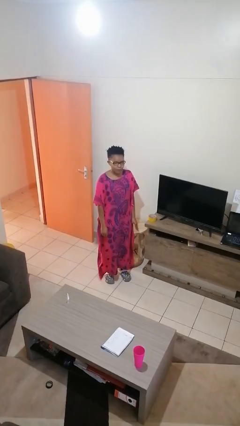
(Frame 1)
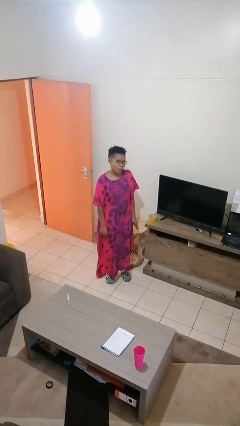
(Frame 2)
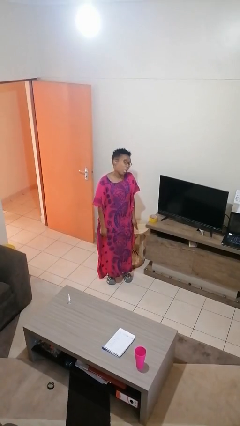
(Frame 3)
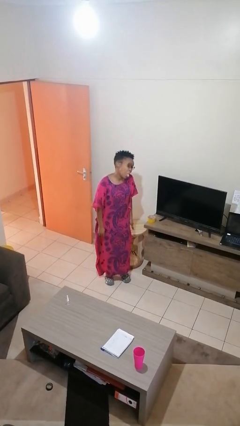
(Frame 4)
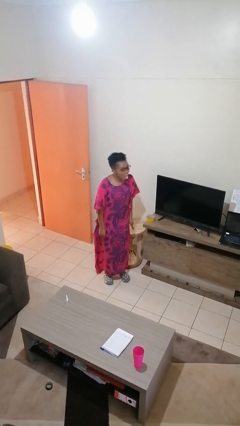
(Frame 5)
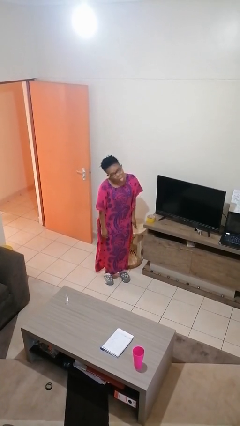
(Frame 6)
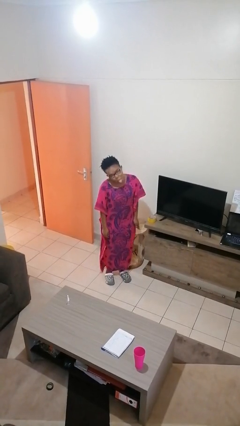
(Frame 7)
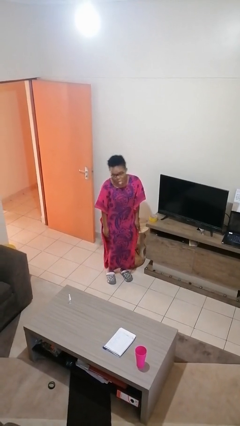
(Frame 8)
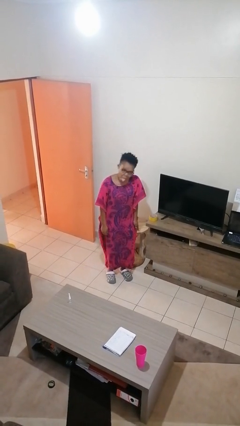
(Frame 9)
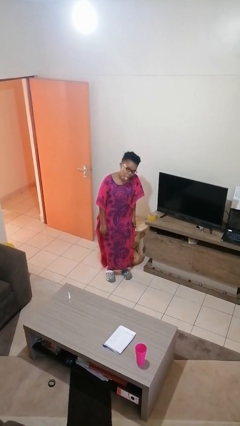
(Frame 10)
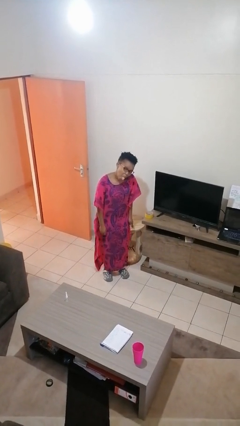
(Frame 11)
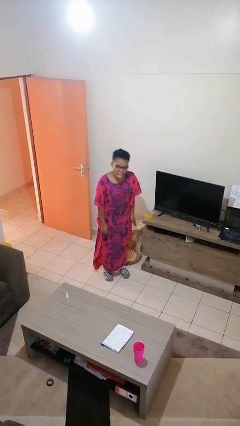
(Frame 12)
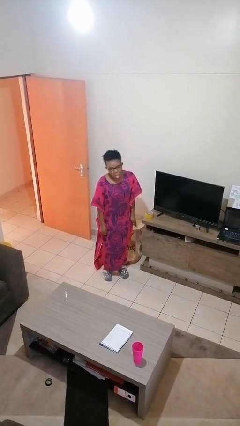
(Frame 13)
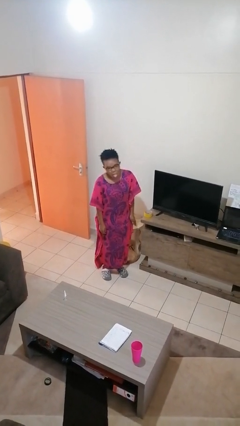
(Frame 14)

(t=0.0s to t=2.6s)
person sticks out tongue

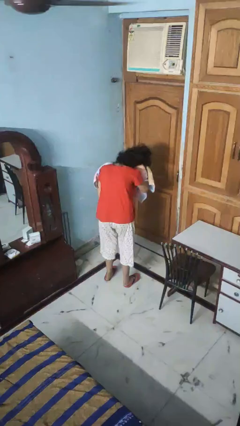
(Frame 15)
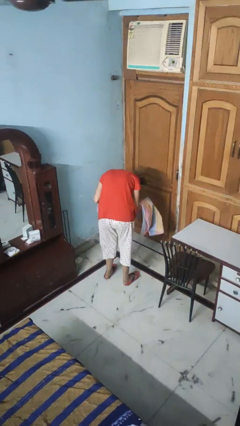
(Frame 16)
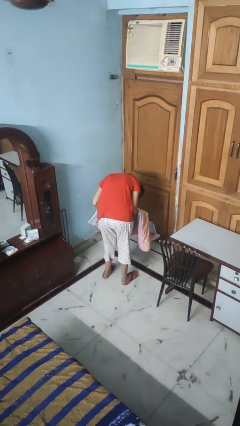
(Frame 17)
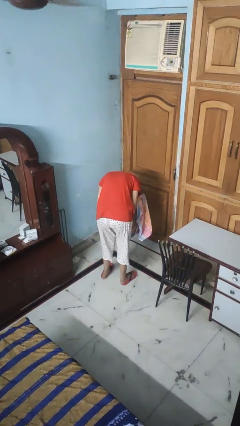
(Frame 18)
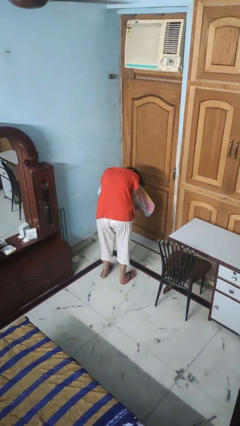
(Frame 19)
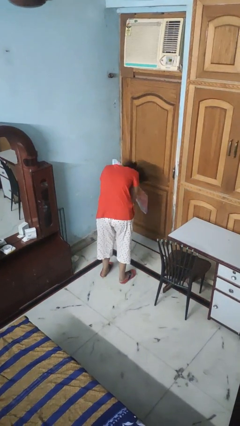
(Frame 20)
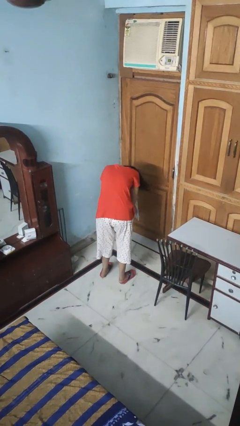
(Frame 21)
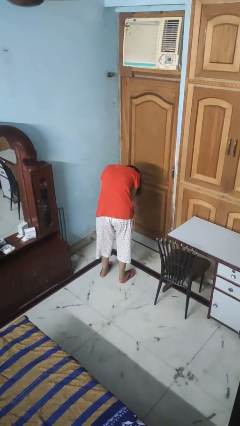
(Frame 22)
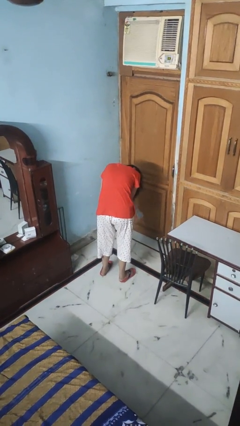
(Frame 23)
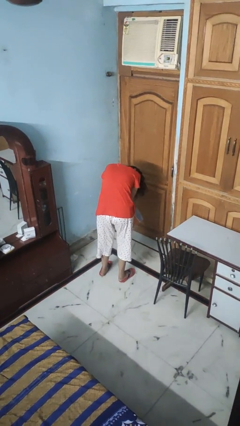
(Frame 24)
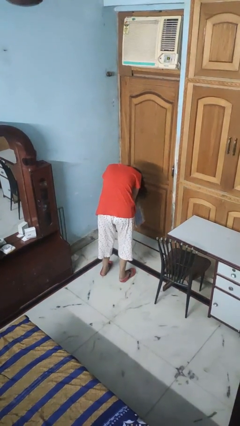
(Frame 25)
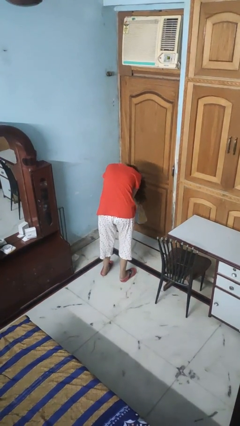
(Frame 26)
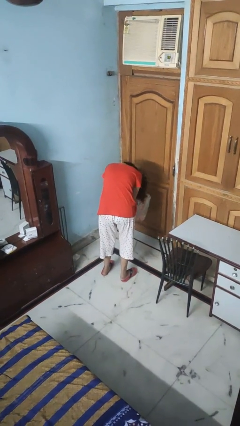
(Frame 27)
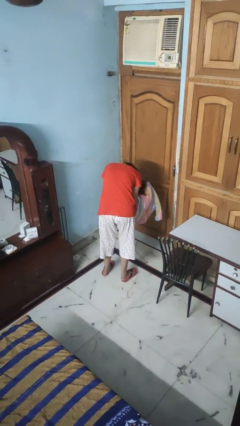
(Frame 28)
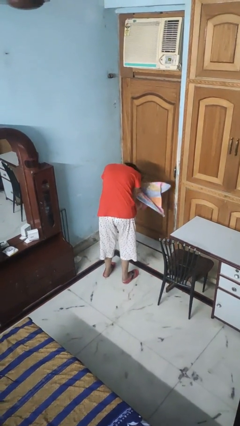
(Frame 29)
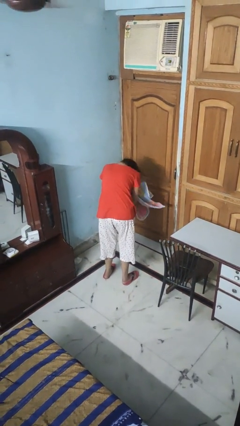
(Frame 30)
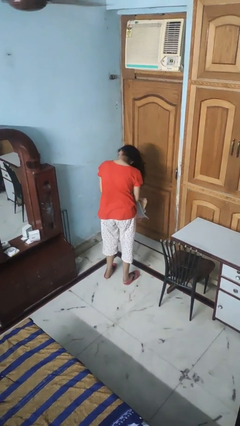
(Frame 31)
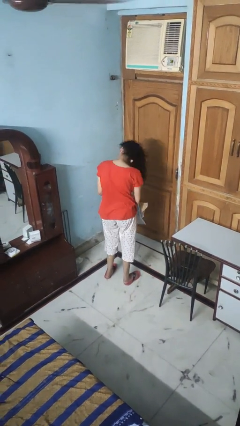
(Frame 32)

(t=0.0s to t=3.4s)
person dries hair with towel

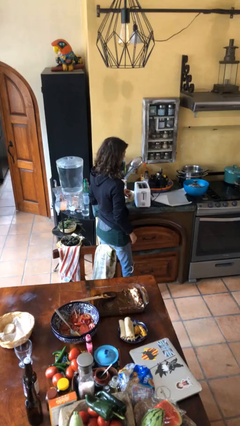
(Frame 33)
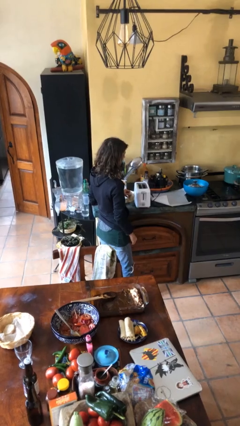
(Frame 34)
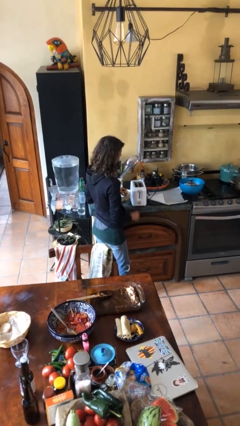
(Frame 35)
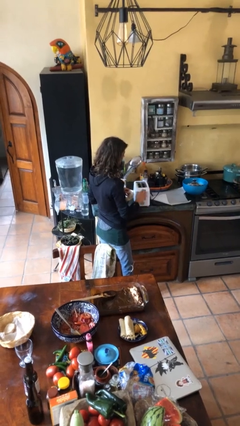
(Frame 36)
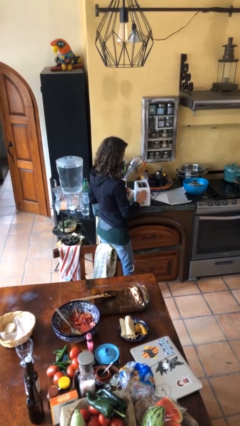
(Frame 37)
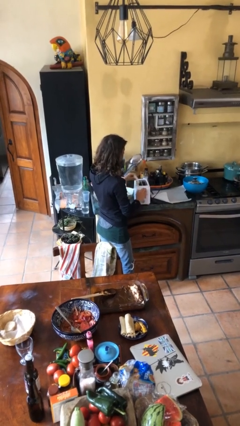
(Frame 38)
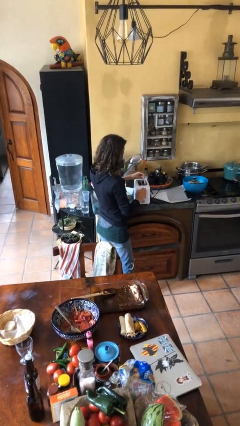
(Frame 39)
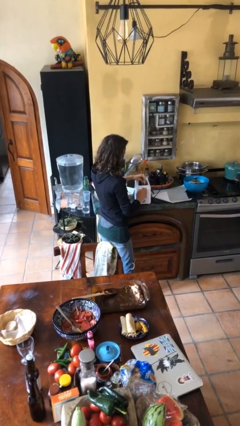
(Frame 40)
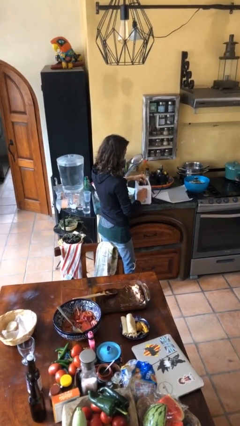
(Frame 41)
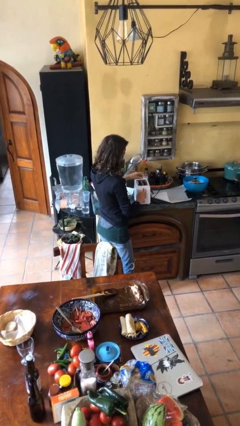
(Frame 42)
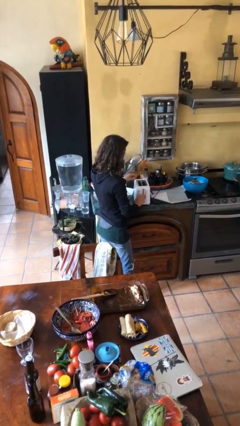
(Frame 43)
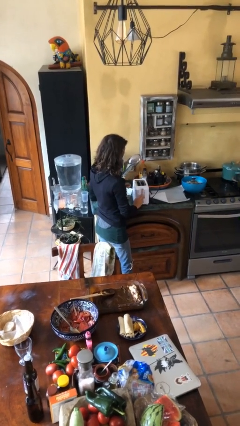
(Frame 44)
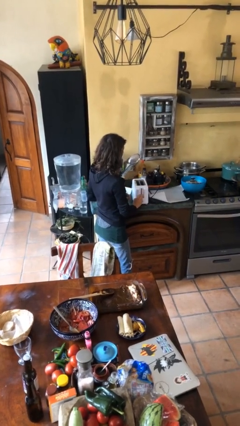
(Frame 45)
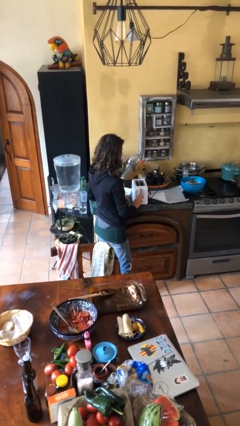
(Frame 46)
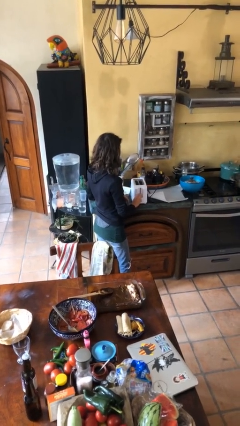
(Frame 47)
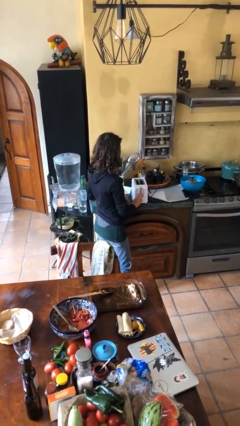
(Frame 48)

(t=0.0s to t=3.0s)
person puts object into toaster

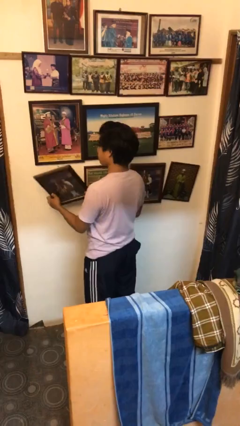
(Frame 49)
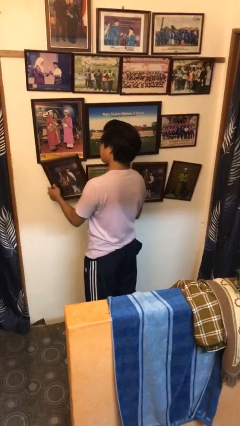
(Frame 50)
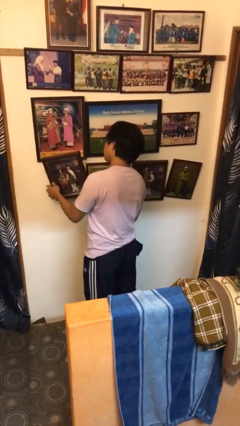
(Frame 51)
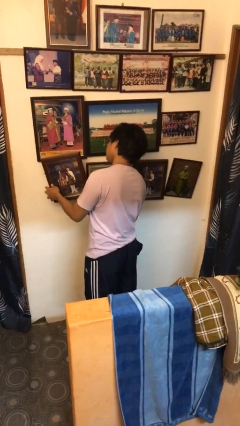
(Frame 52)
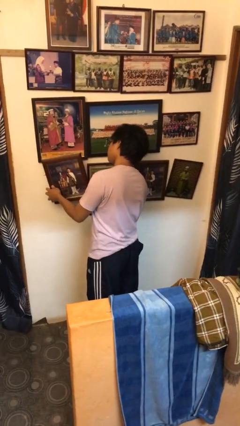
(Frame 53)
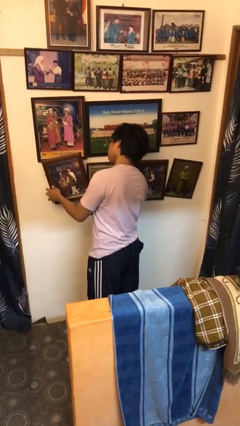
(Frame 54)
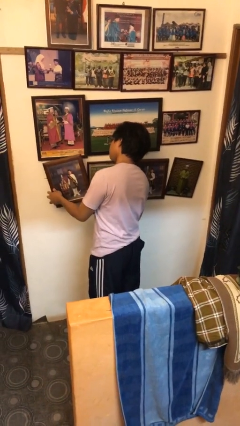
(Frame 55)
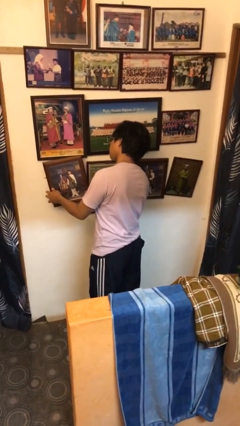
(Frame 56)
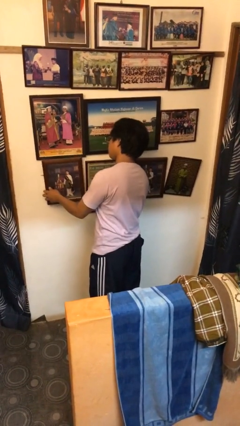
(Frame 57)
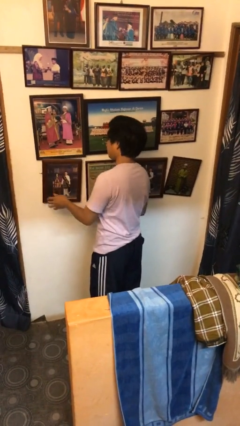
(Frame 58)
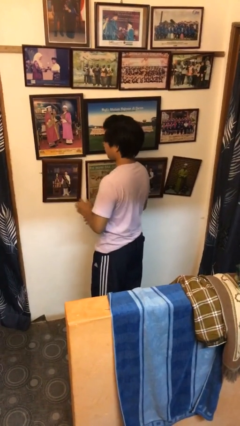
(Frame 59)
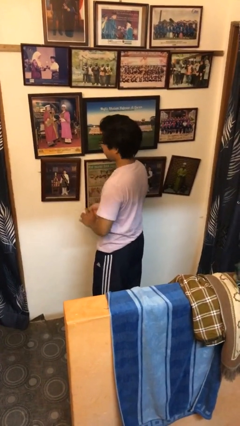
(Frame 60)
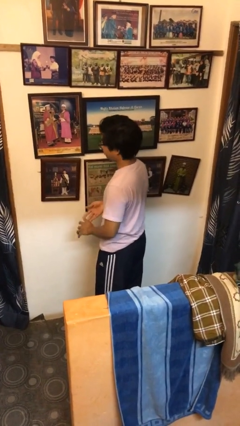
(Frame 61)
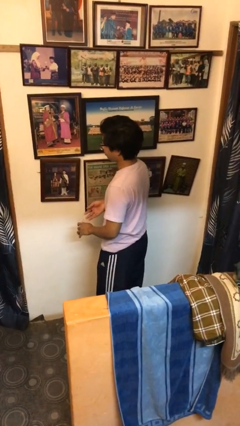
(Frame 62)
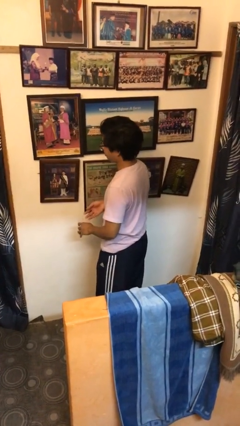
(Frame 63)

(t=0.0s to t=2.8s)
person puts up picture frame

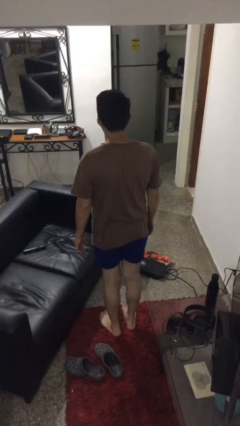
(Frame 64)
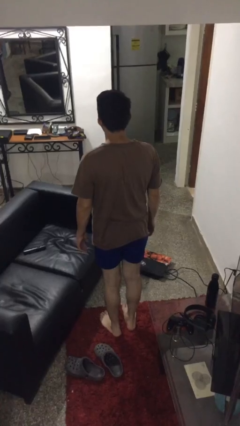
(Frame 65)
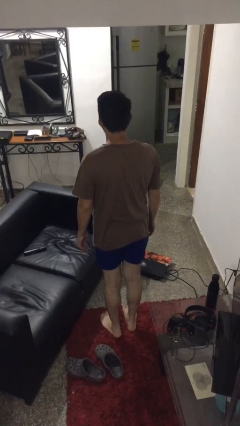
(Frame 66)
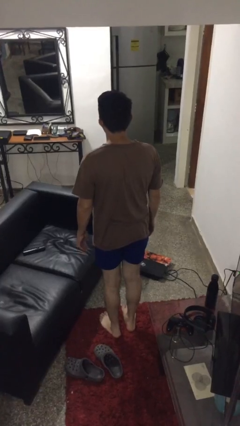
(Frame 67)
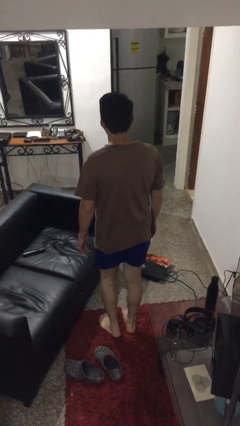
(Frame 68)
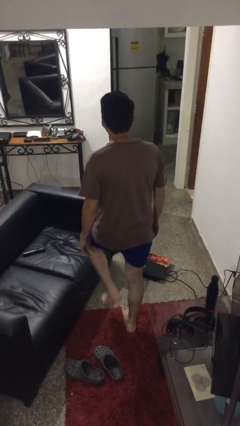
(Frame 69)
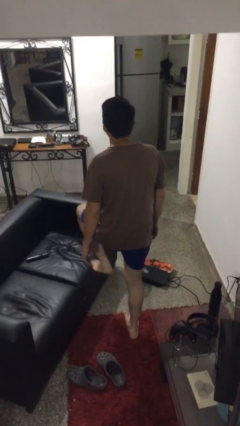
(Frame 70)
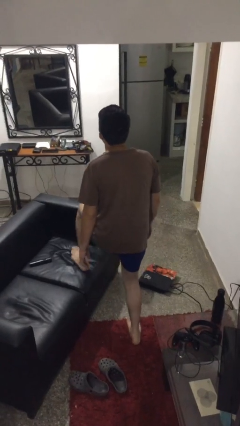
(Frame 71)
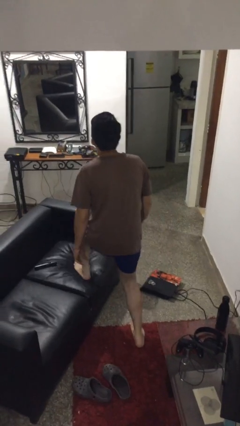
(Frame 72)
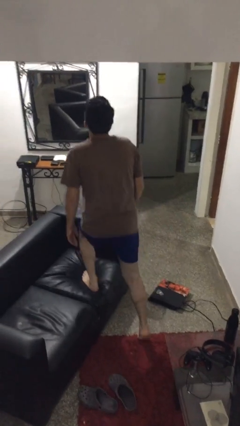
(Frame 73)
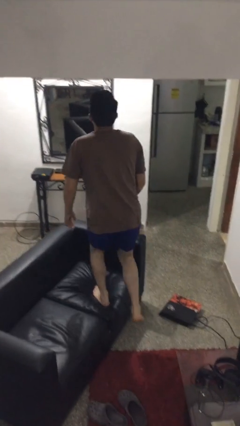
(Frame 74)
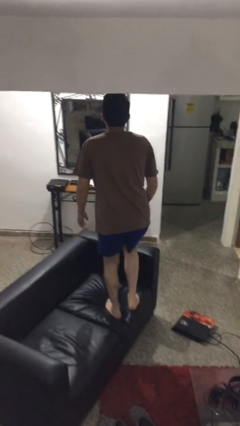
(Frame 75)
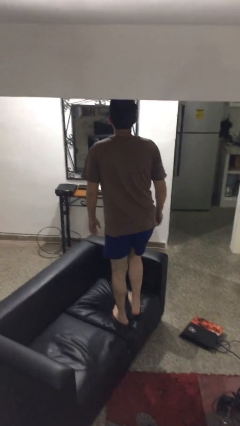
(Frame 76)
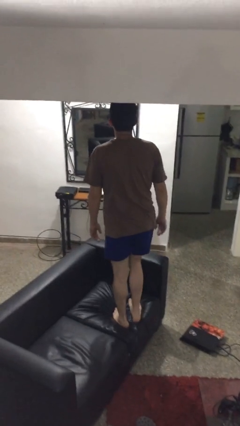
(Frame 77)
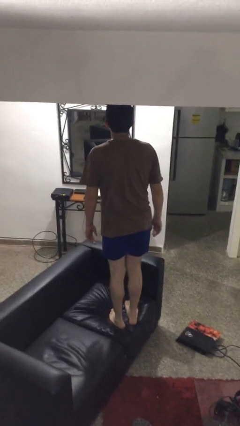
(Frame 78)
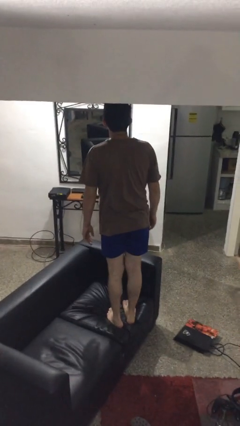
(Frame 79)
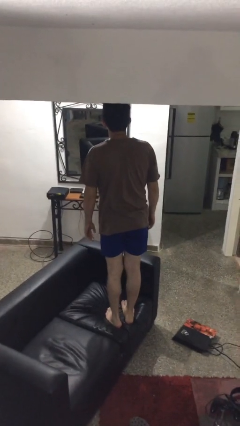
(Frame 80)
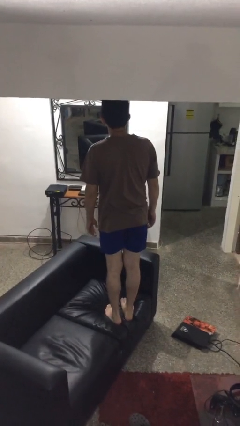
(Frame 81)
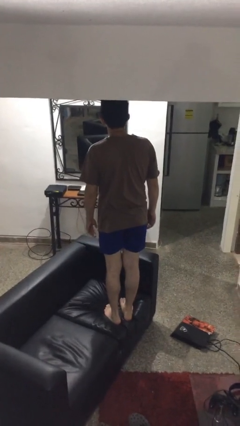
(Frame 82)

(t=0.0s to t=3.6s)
person climbs on couch

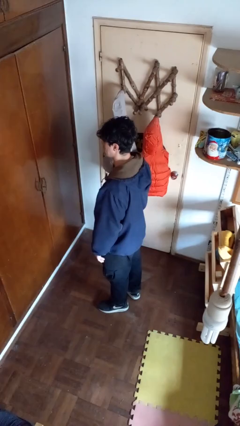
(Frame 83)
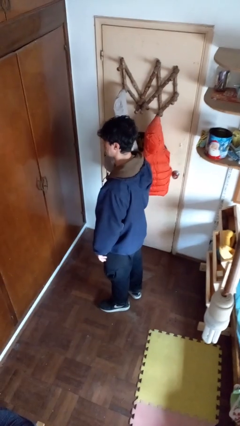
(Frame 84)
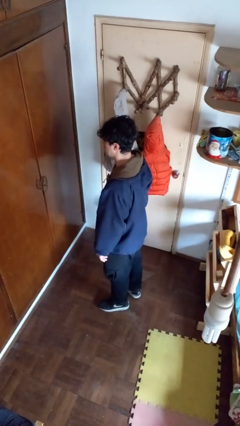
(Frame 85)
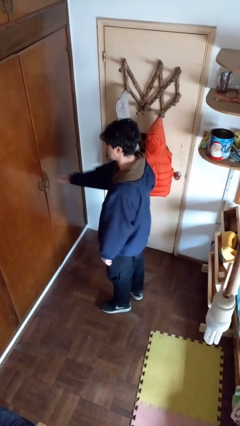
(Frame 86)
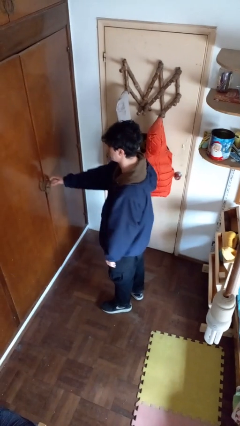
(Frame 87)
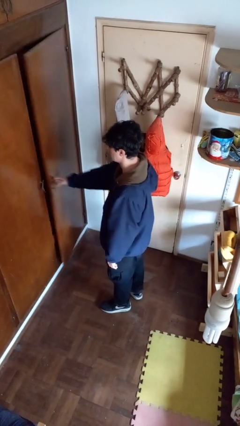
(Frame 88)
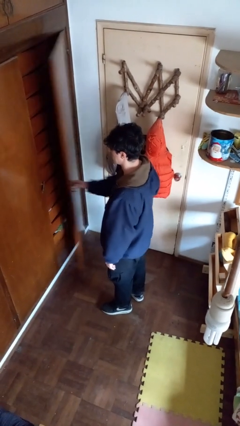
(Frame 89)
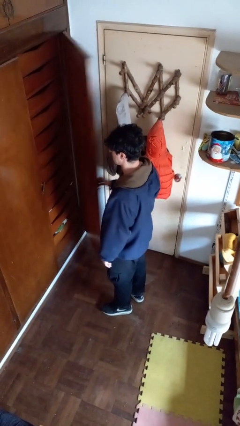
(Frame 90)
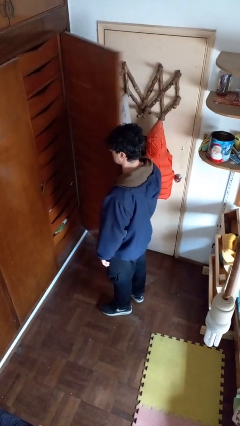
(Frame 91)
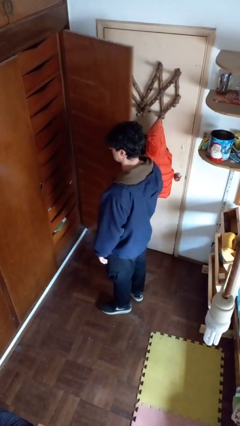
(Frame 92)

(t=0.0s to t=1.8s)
person opens closet door

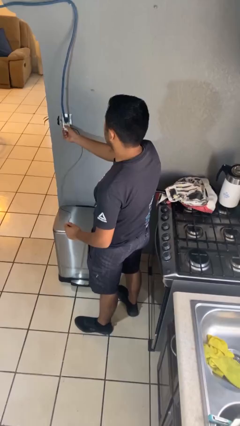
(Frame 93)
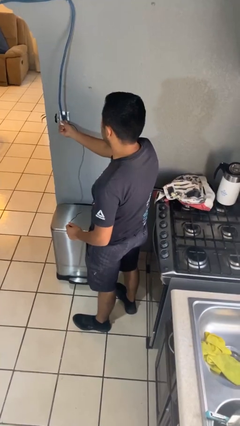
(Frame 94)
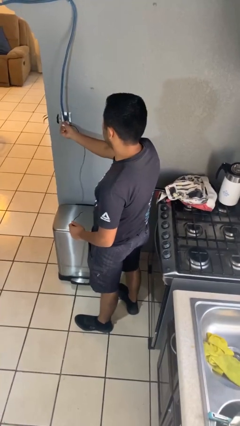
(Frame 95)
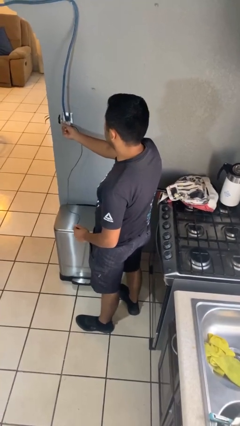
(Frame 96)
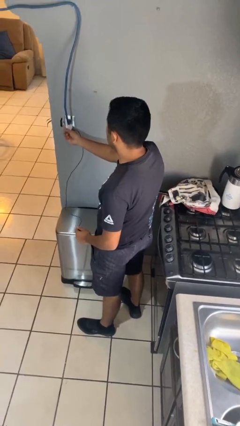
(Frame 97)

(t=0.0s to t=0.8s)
person plugs into electrical socket
